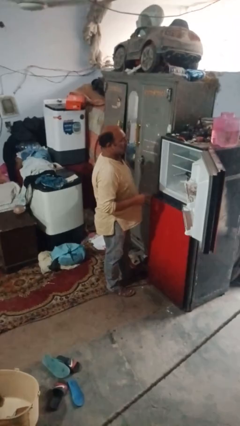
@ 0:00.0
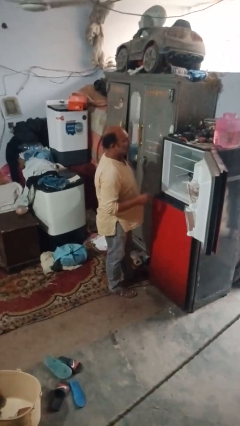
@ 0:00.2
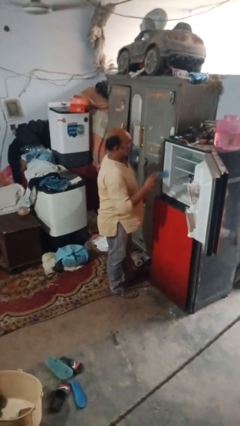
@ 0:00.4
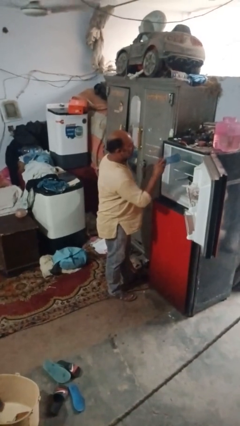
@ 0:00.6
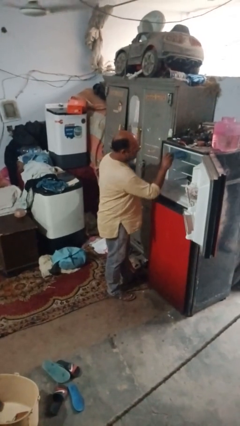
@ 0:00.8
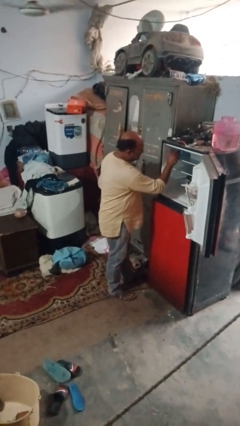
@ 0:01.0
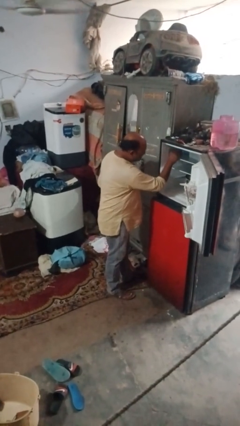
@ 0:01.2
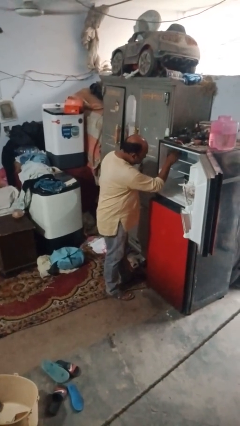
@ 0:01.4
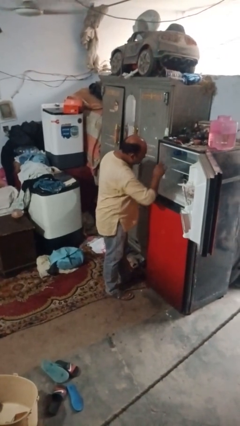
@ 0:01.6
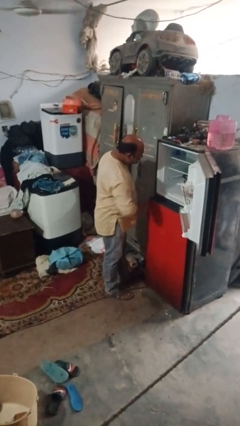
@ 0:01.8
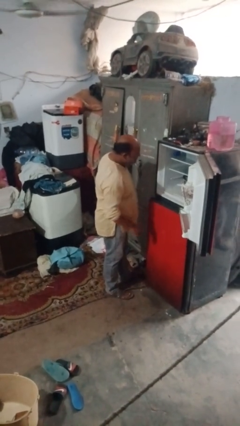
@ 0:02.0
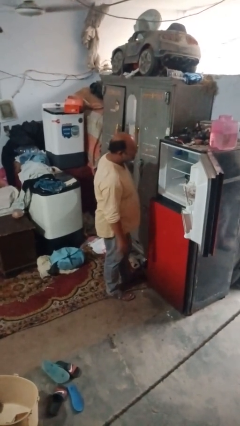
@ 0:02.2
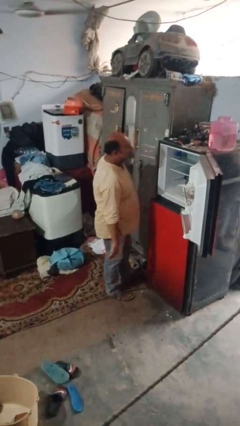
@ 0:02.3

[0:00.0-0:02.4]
person puts object into refrigerator

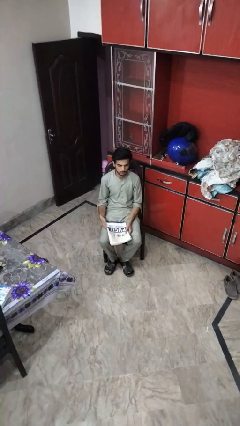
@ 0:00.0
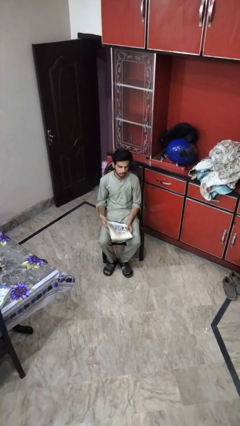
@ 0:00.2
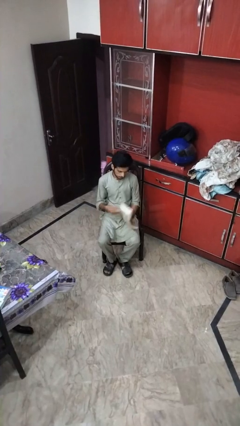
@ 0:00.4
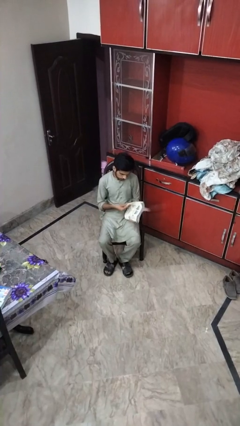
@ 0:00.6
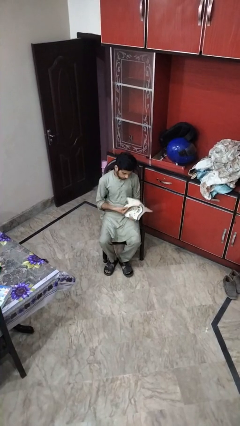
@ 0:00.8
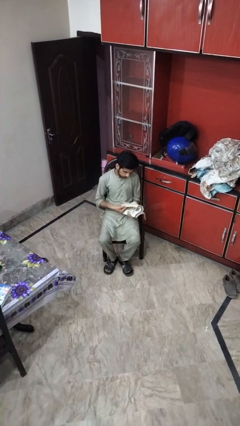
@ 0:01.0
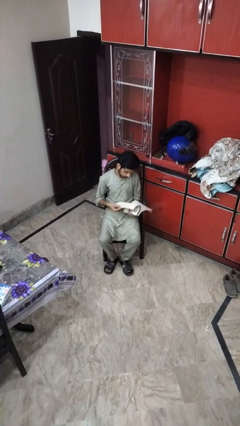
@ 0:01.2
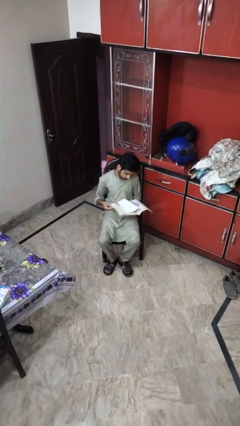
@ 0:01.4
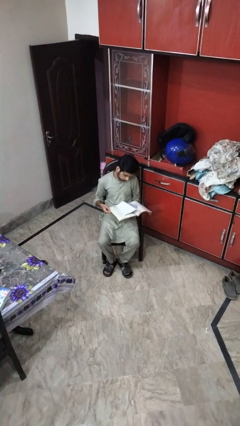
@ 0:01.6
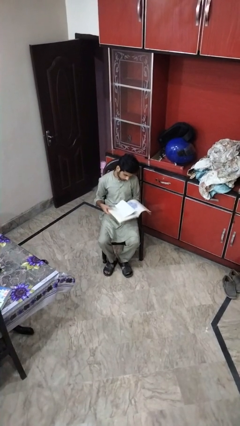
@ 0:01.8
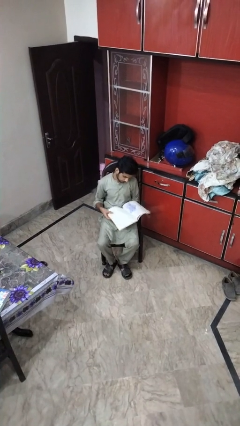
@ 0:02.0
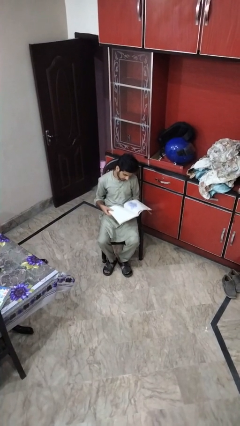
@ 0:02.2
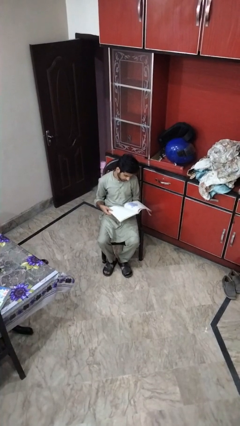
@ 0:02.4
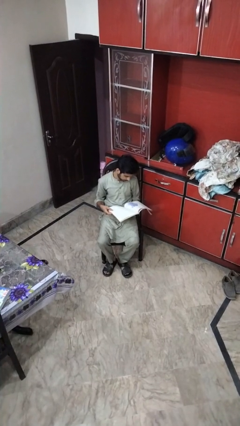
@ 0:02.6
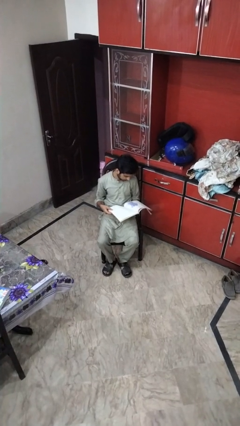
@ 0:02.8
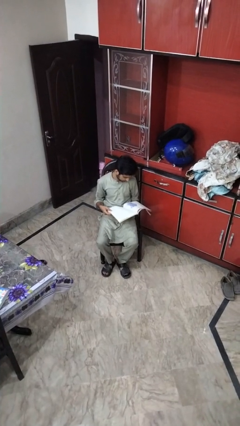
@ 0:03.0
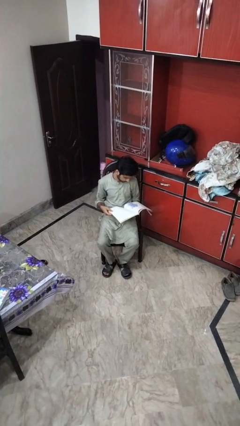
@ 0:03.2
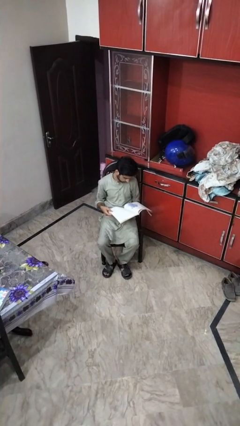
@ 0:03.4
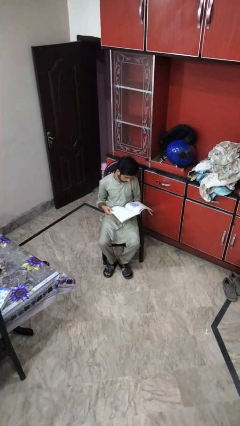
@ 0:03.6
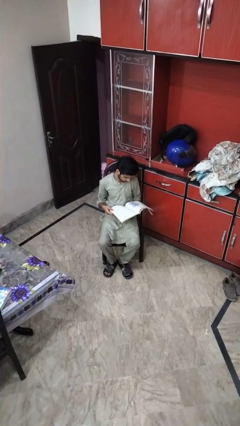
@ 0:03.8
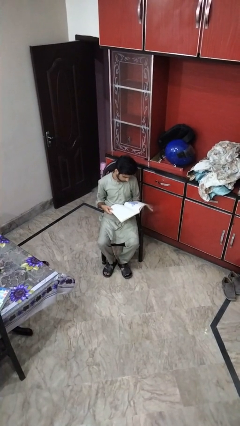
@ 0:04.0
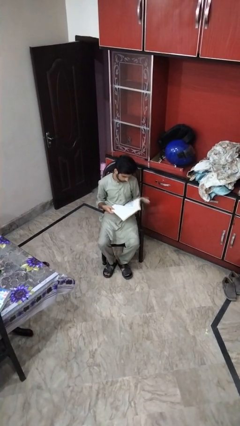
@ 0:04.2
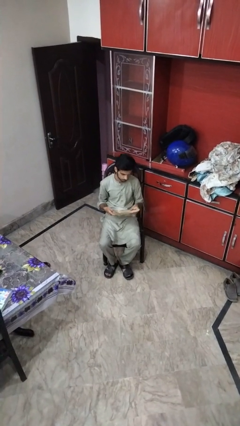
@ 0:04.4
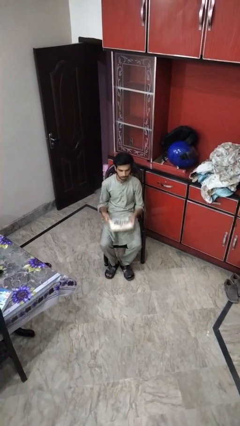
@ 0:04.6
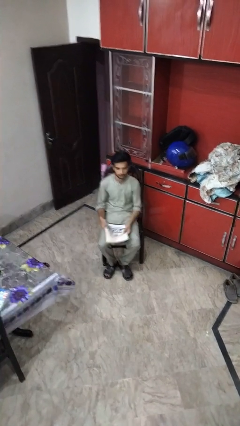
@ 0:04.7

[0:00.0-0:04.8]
person reads magazine

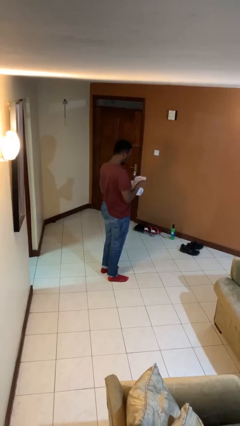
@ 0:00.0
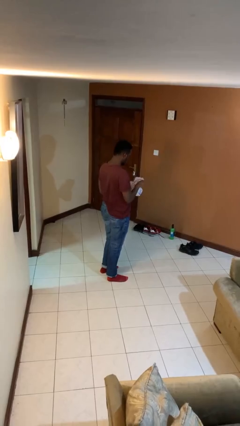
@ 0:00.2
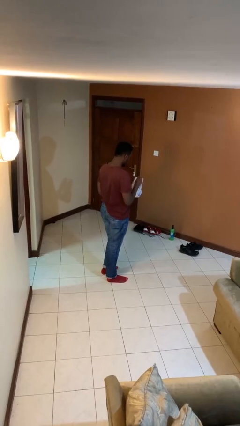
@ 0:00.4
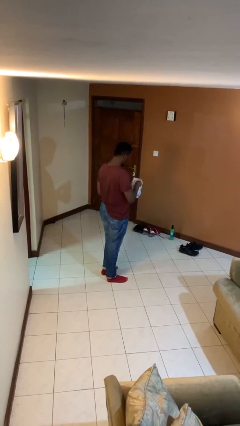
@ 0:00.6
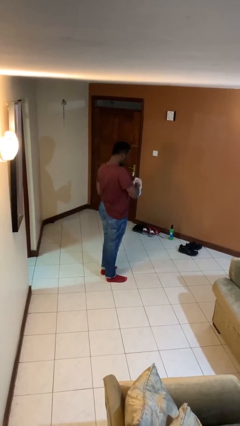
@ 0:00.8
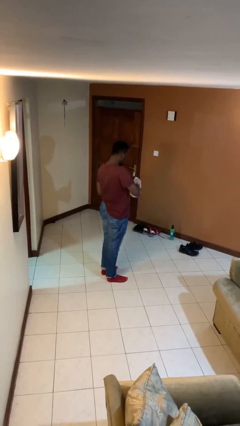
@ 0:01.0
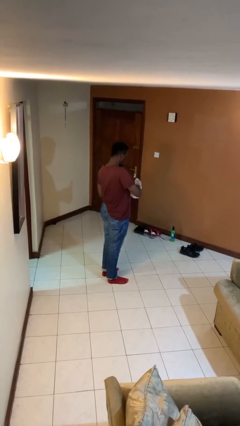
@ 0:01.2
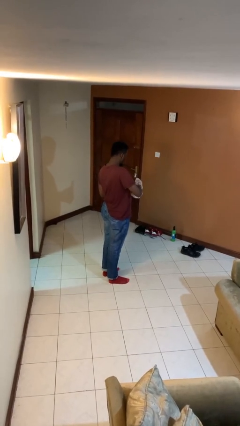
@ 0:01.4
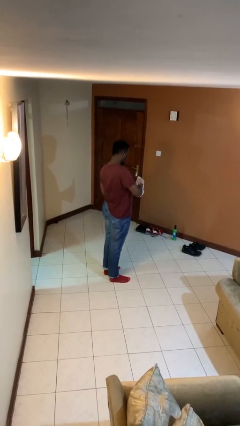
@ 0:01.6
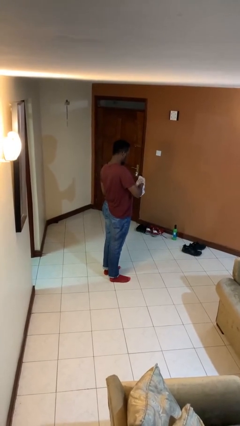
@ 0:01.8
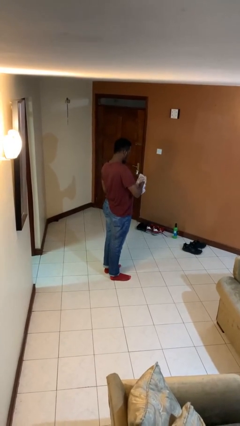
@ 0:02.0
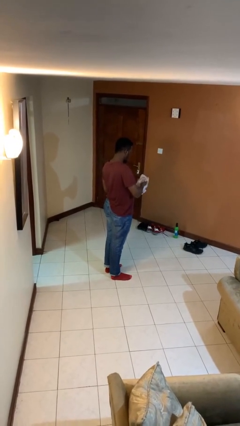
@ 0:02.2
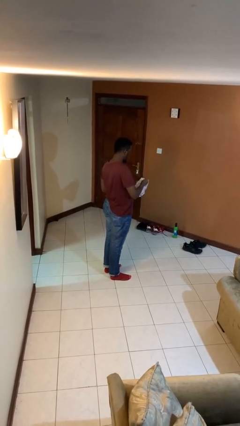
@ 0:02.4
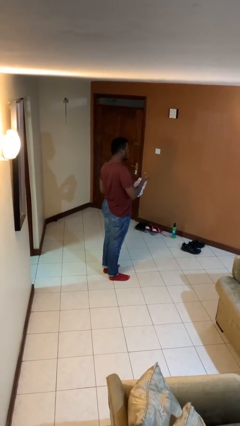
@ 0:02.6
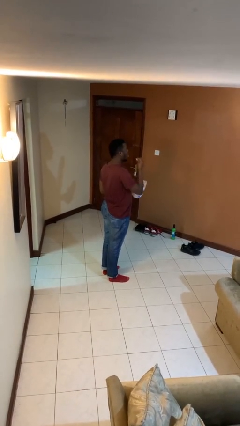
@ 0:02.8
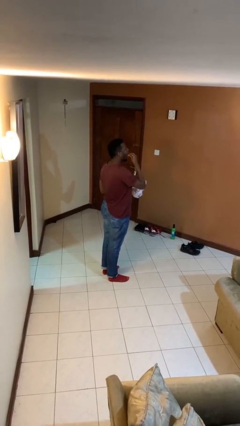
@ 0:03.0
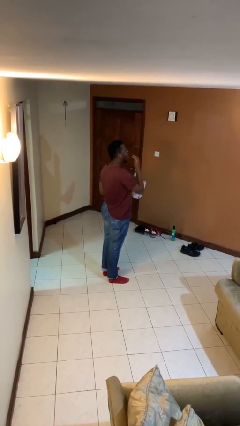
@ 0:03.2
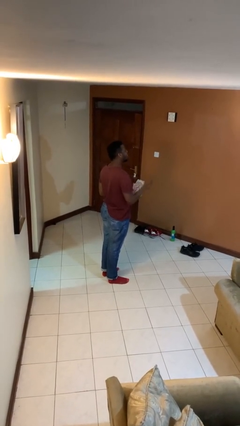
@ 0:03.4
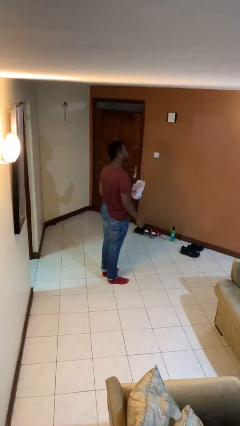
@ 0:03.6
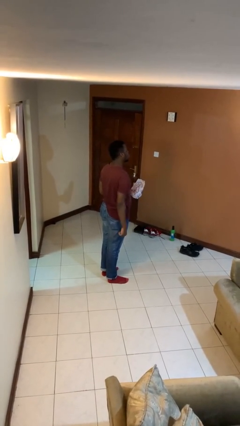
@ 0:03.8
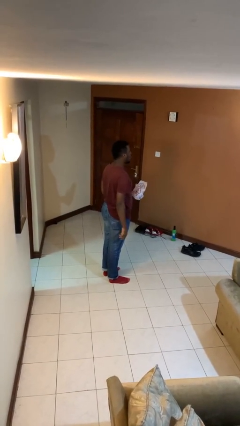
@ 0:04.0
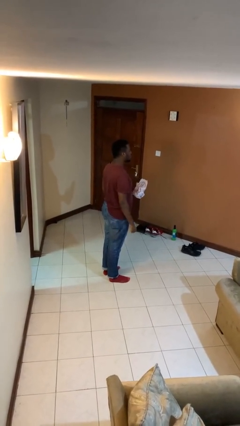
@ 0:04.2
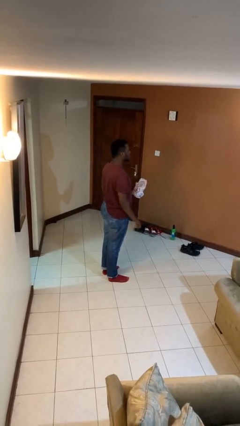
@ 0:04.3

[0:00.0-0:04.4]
person eats snack from bag

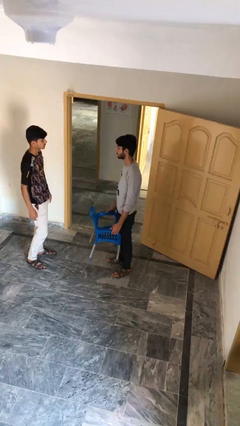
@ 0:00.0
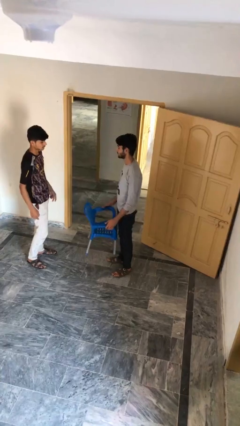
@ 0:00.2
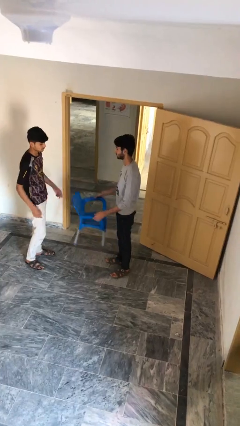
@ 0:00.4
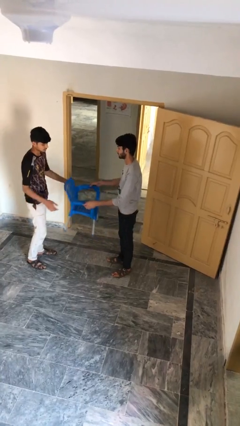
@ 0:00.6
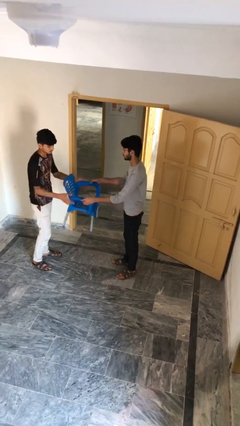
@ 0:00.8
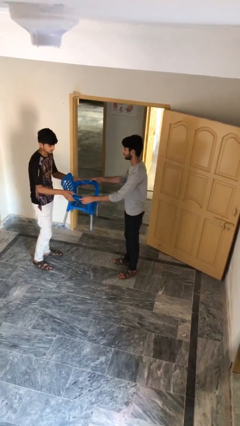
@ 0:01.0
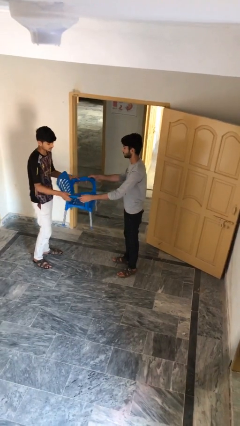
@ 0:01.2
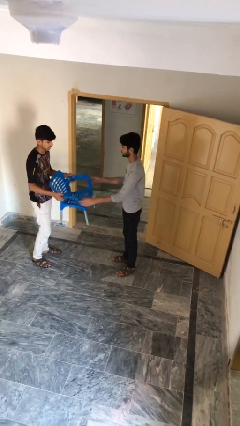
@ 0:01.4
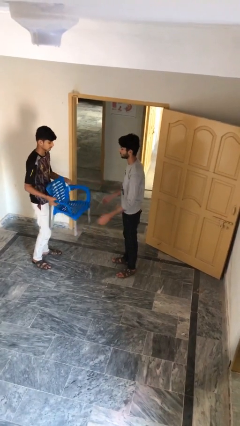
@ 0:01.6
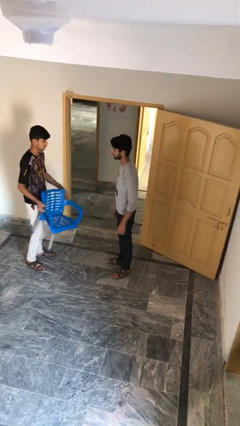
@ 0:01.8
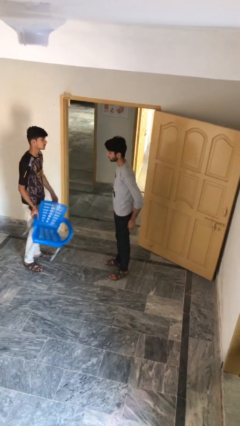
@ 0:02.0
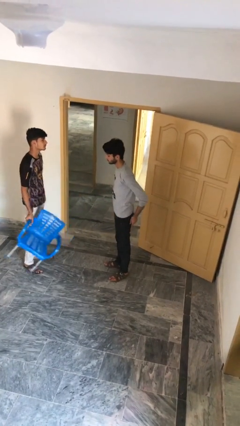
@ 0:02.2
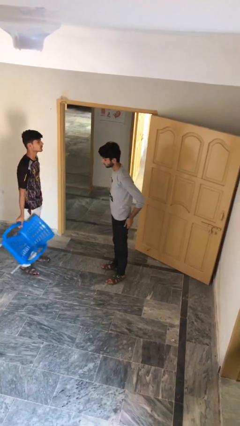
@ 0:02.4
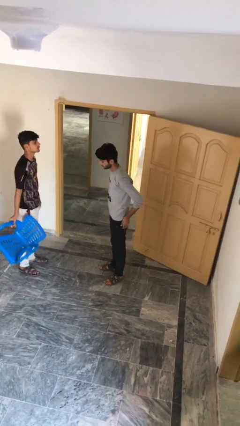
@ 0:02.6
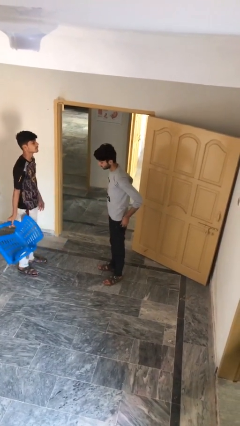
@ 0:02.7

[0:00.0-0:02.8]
person transfers object to person

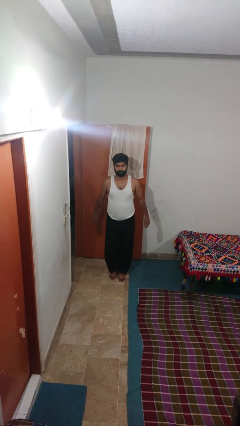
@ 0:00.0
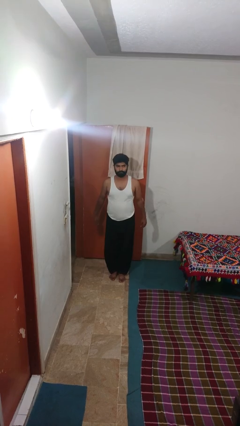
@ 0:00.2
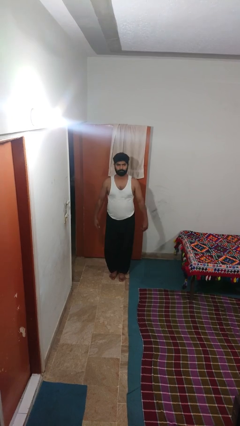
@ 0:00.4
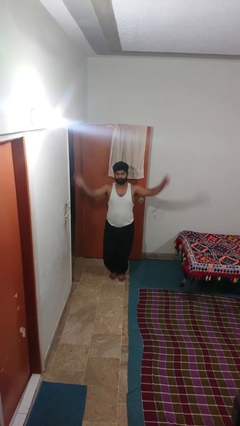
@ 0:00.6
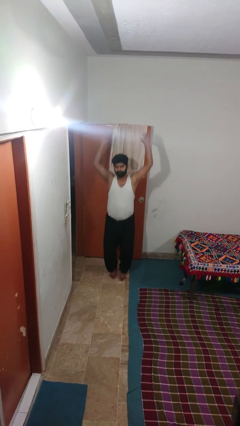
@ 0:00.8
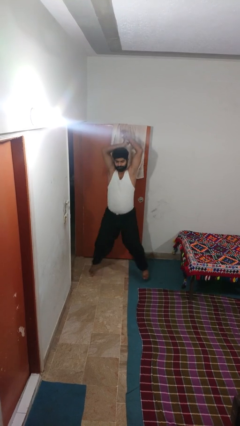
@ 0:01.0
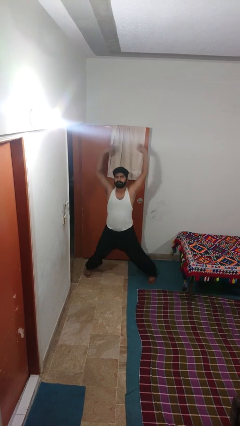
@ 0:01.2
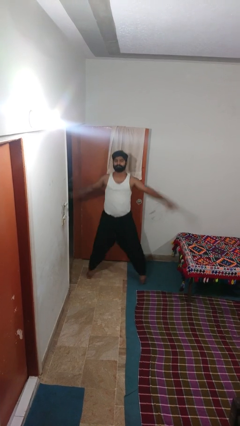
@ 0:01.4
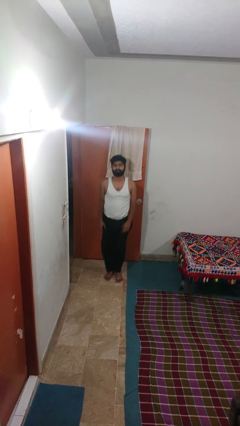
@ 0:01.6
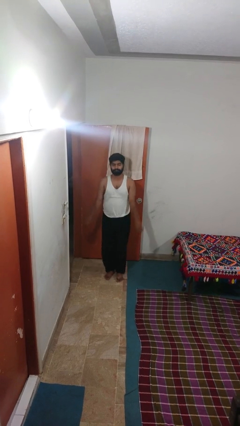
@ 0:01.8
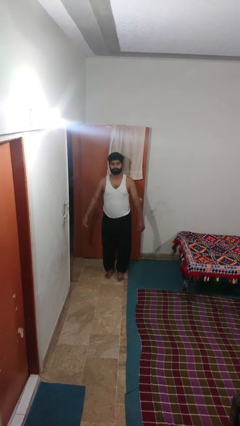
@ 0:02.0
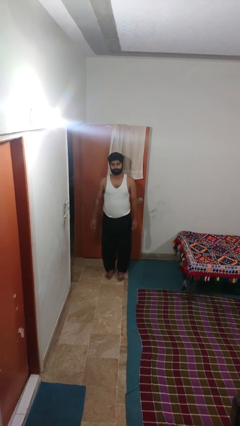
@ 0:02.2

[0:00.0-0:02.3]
person exercises with jumping jacks

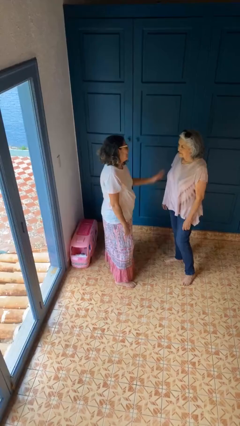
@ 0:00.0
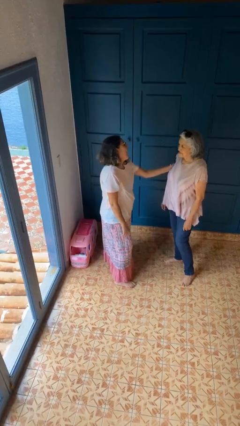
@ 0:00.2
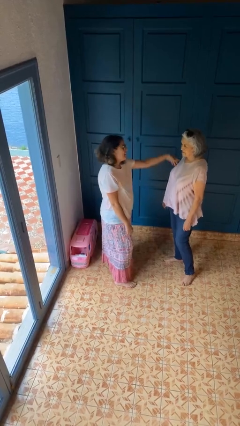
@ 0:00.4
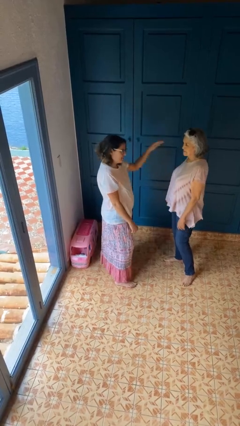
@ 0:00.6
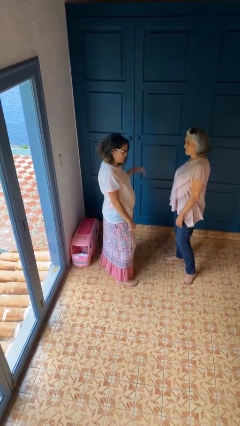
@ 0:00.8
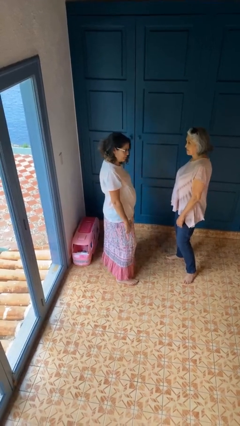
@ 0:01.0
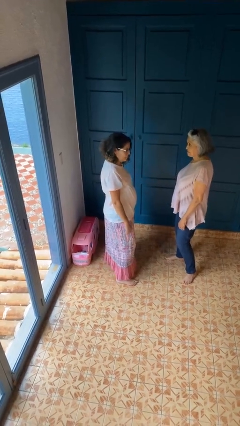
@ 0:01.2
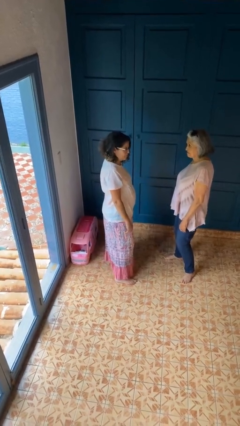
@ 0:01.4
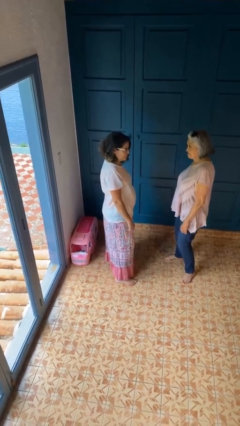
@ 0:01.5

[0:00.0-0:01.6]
person shoves person
